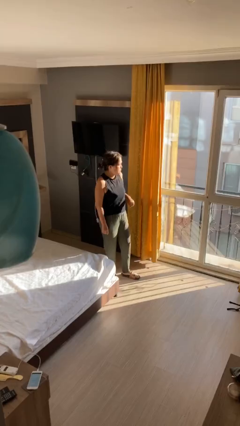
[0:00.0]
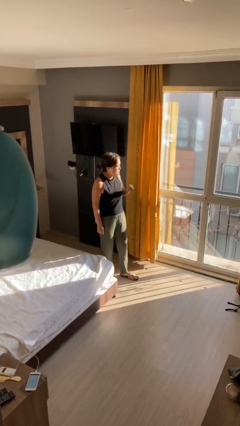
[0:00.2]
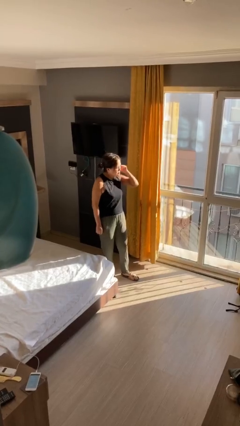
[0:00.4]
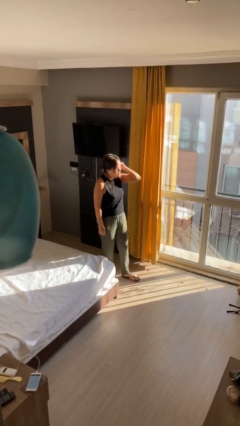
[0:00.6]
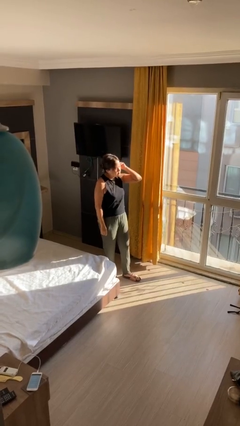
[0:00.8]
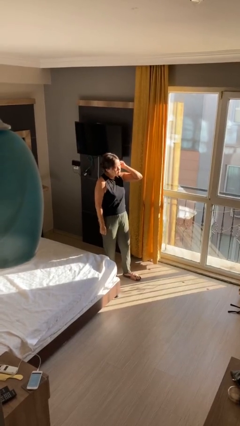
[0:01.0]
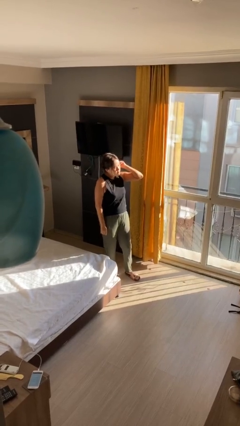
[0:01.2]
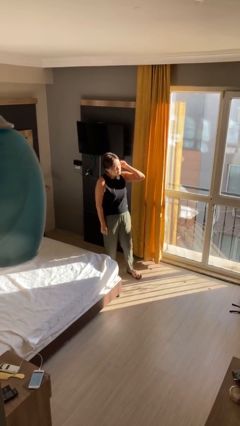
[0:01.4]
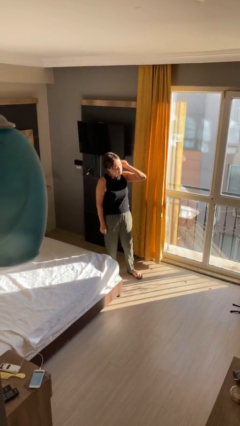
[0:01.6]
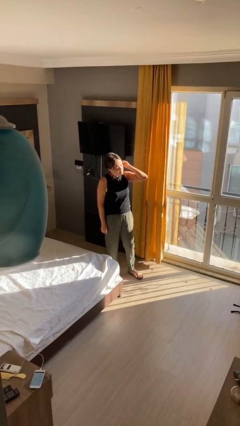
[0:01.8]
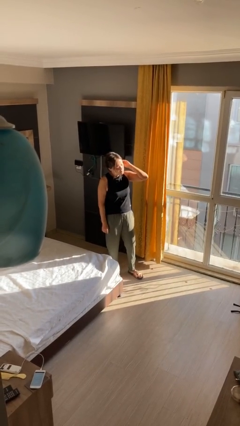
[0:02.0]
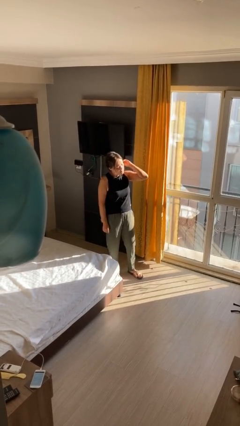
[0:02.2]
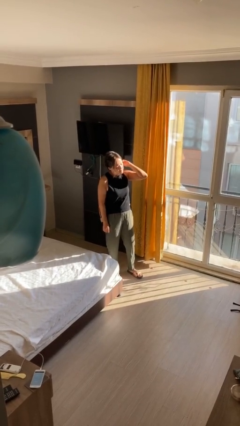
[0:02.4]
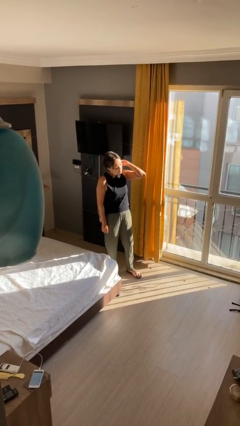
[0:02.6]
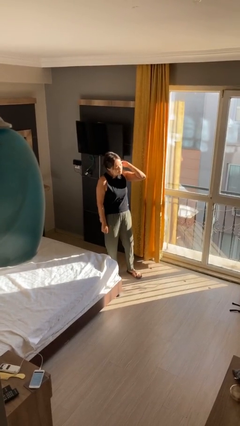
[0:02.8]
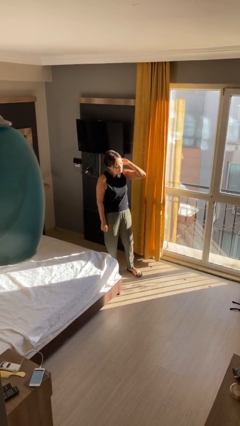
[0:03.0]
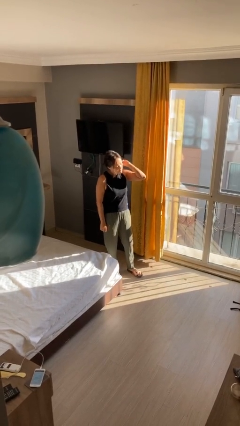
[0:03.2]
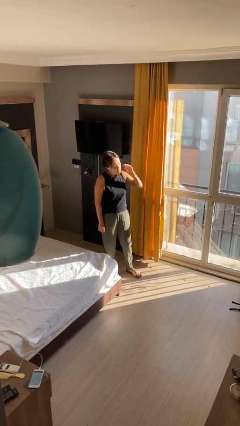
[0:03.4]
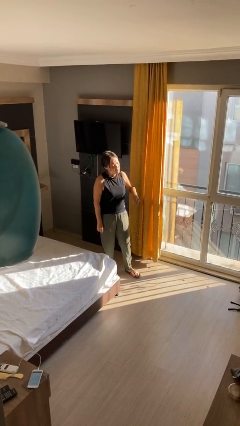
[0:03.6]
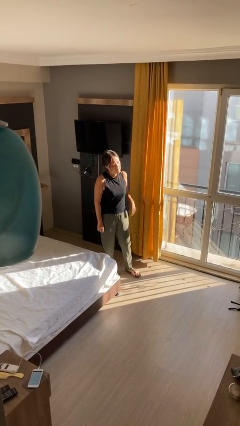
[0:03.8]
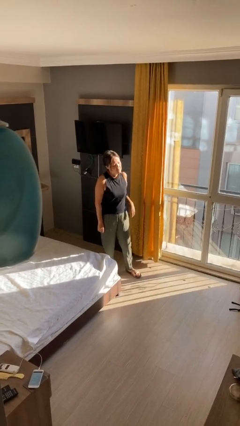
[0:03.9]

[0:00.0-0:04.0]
person touches earlobe

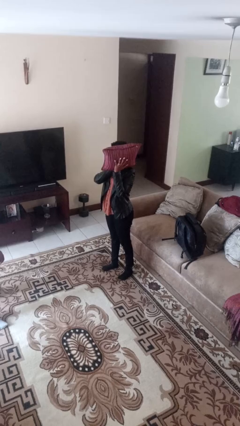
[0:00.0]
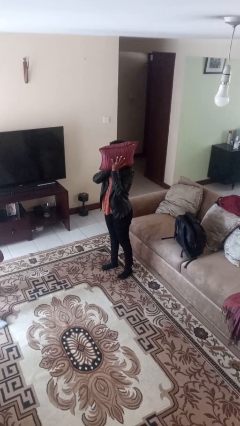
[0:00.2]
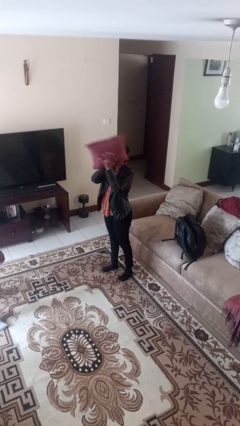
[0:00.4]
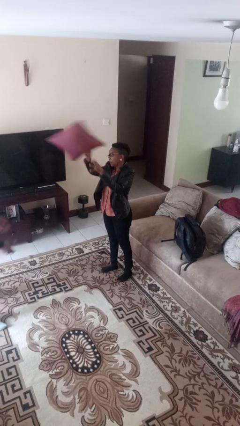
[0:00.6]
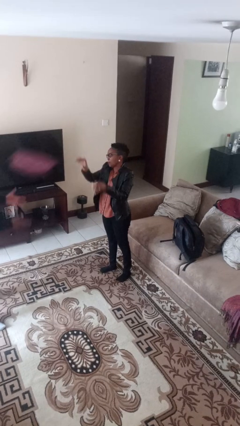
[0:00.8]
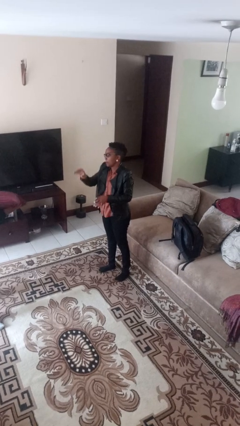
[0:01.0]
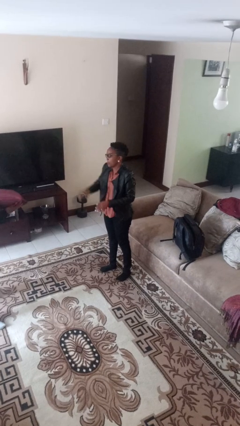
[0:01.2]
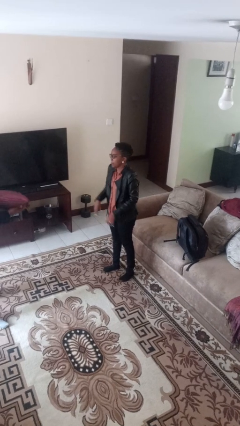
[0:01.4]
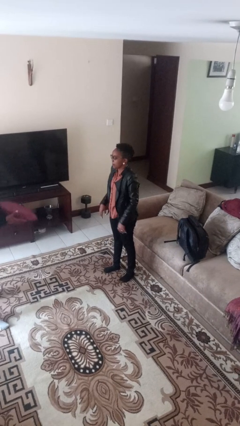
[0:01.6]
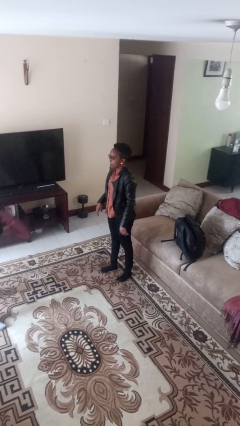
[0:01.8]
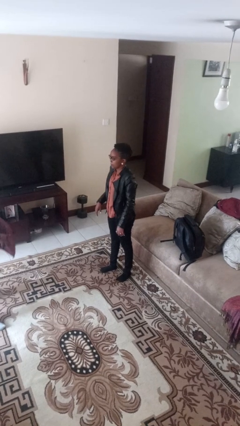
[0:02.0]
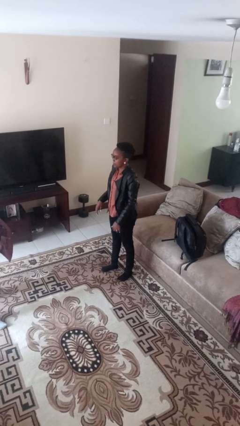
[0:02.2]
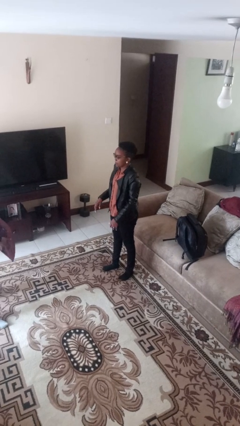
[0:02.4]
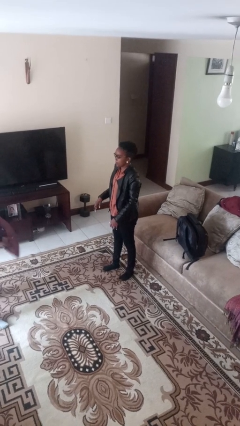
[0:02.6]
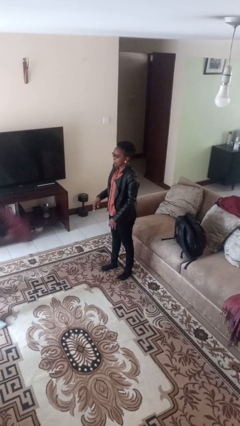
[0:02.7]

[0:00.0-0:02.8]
person throws object to person

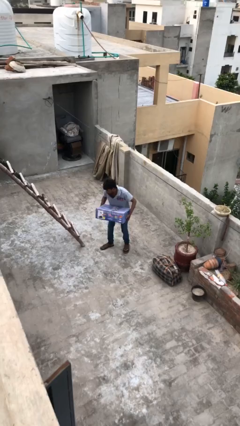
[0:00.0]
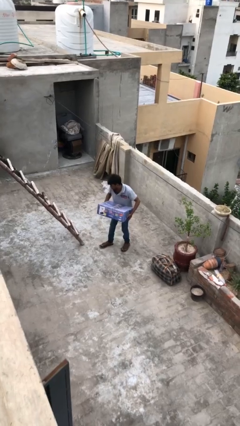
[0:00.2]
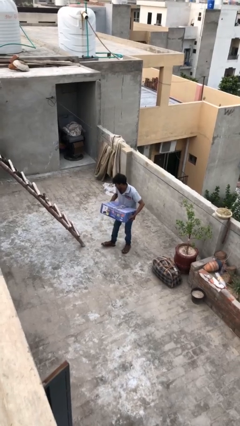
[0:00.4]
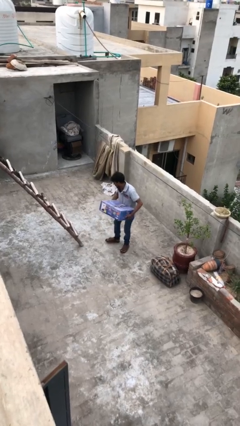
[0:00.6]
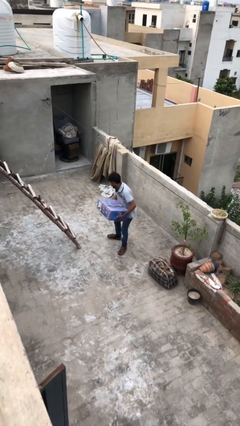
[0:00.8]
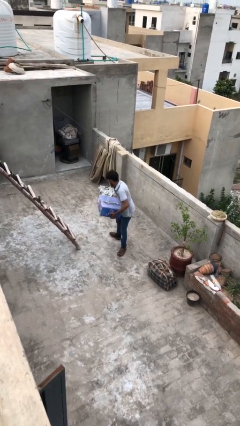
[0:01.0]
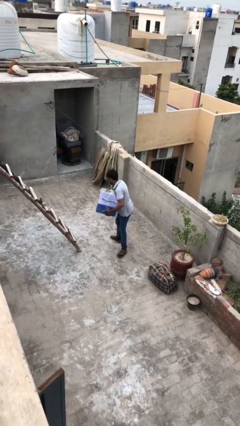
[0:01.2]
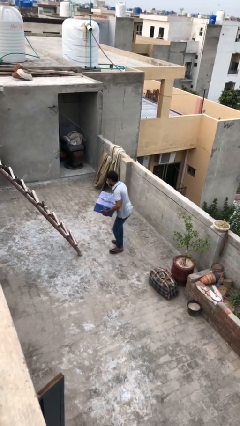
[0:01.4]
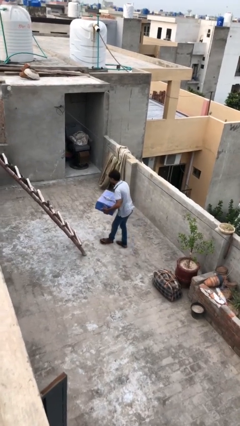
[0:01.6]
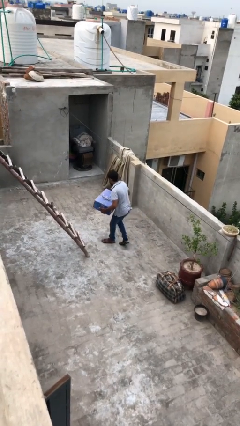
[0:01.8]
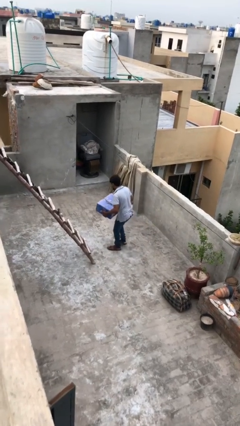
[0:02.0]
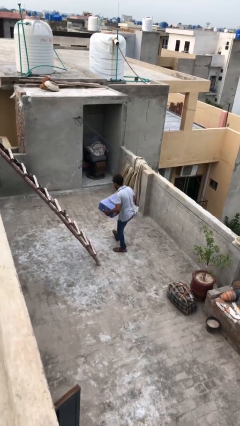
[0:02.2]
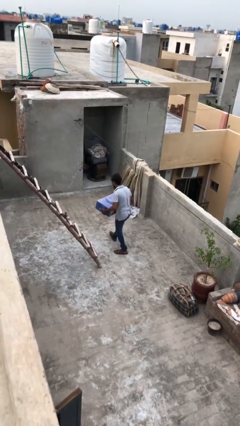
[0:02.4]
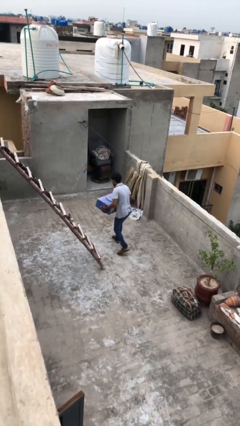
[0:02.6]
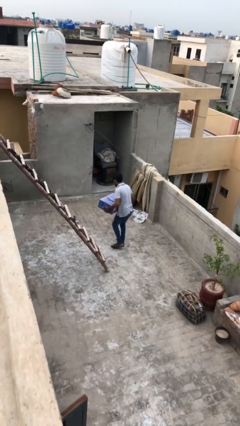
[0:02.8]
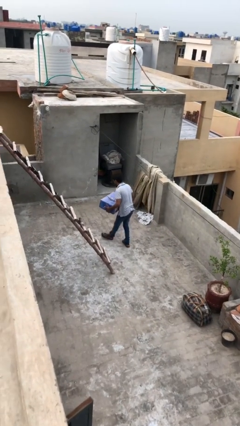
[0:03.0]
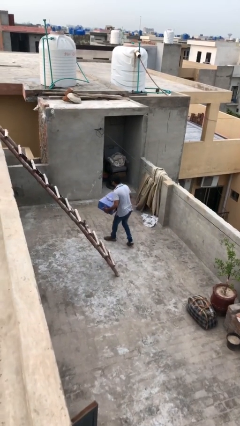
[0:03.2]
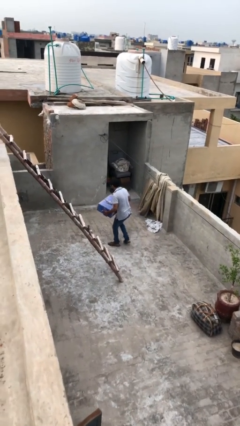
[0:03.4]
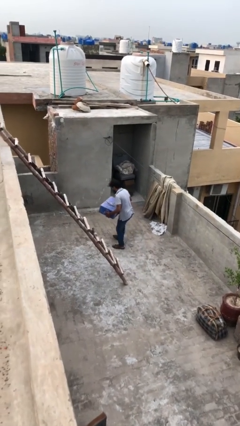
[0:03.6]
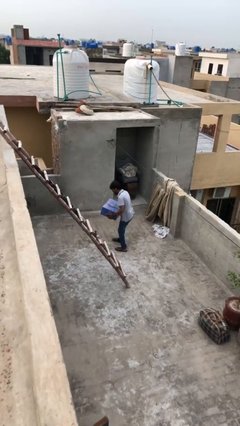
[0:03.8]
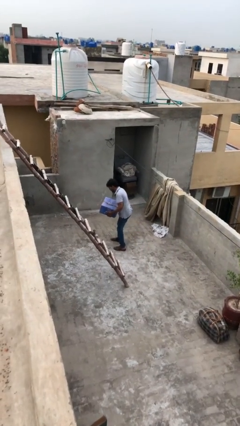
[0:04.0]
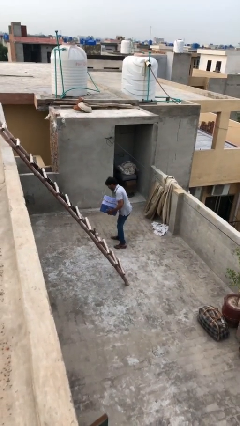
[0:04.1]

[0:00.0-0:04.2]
person carries heavy object

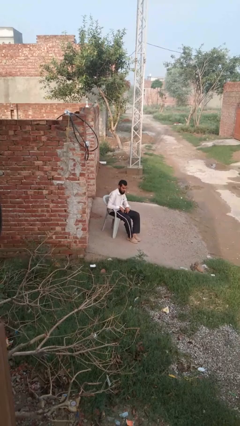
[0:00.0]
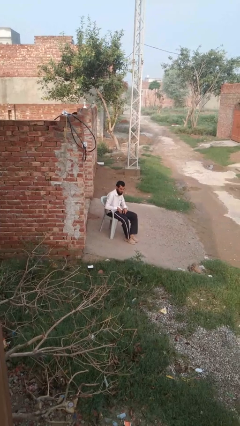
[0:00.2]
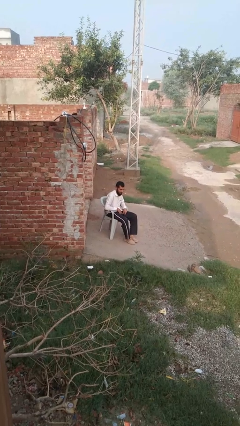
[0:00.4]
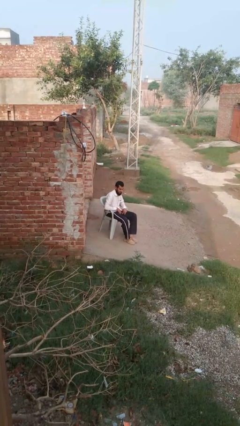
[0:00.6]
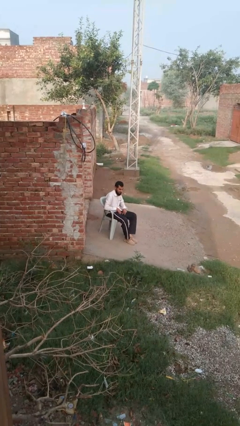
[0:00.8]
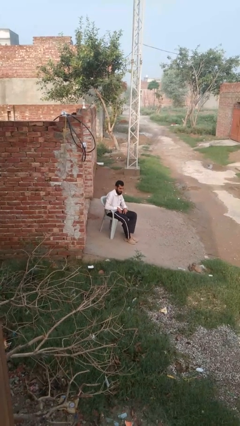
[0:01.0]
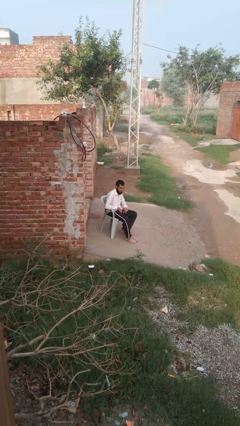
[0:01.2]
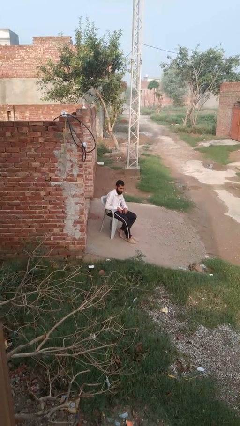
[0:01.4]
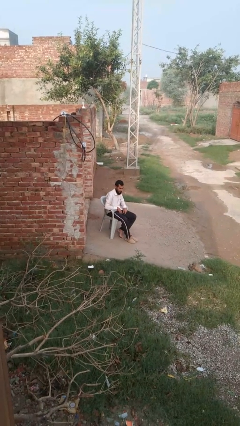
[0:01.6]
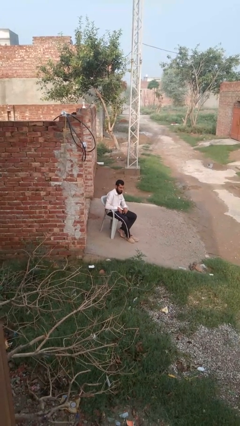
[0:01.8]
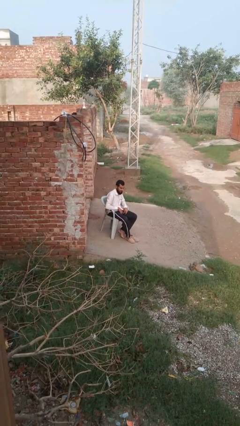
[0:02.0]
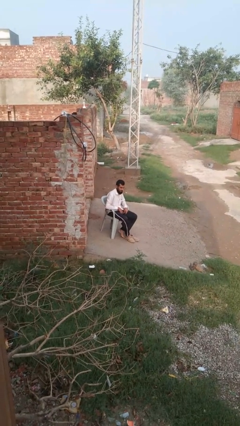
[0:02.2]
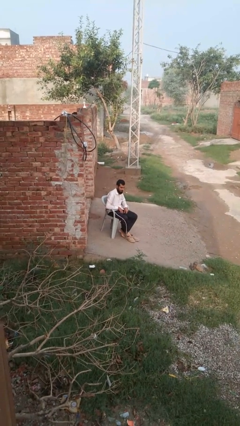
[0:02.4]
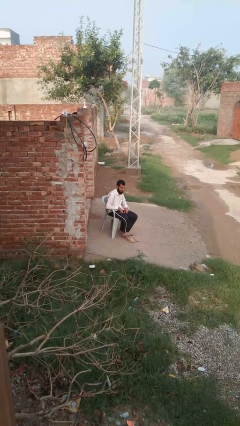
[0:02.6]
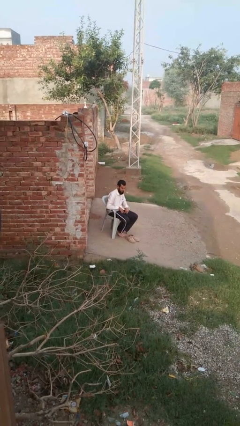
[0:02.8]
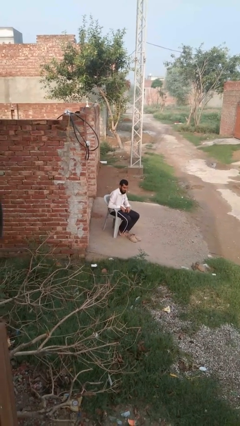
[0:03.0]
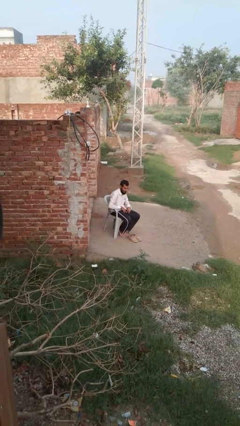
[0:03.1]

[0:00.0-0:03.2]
person takes off shoes

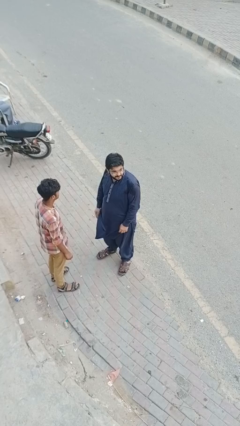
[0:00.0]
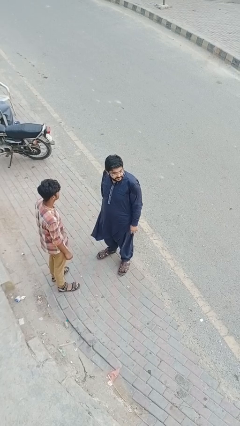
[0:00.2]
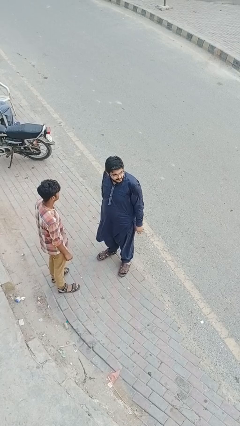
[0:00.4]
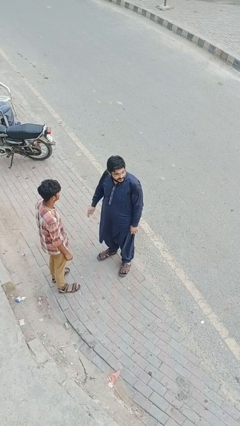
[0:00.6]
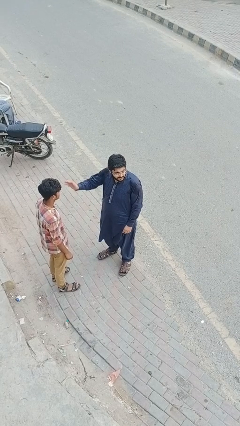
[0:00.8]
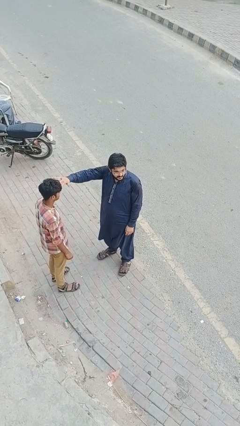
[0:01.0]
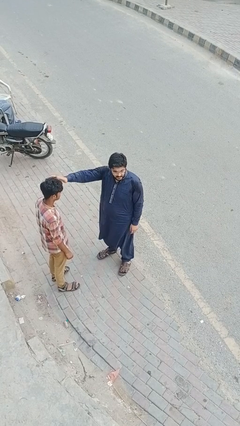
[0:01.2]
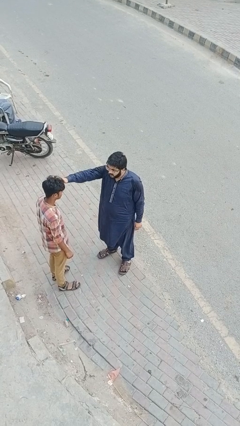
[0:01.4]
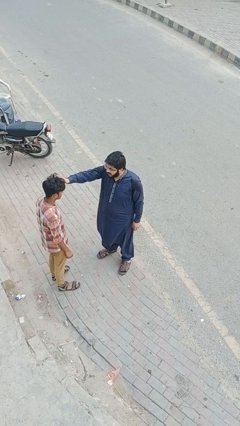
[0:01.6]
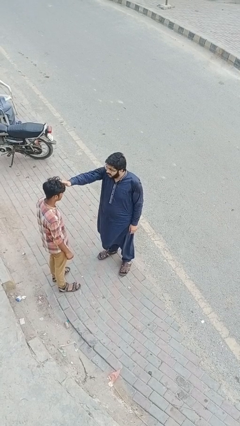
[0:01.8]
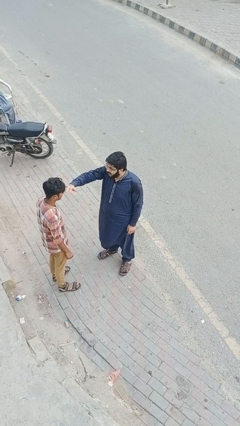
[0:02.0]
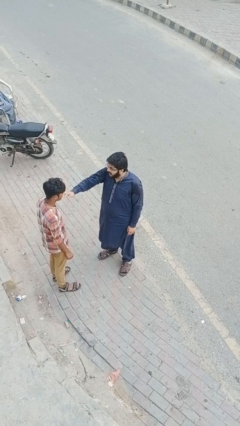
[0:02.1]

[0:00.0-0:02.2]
person grabs person by hair

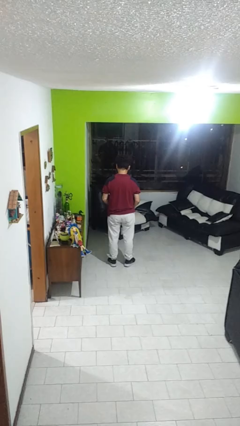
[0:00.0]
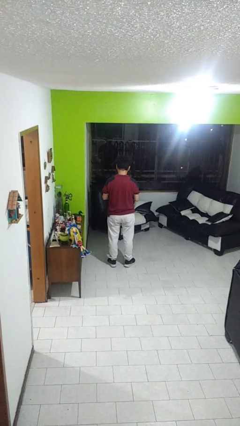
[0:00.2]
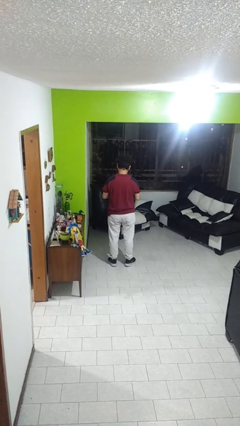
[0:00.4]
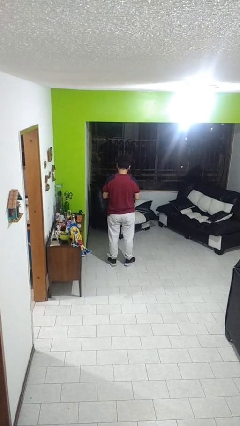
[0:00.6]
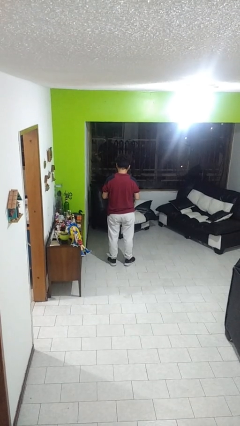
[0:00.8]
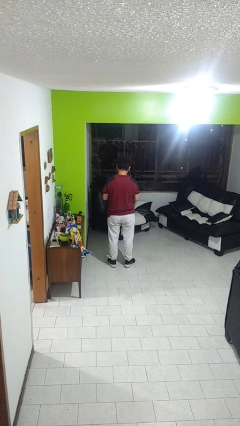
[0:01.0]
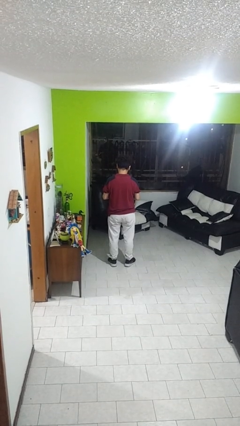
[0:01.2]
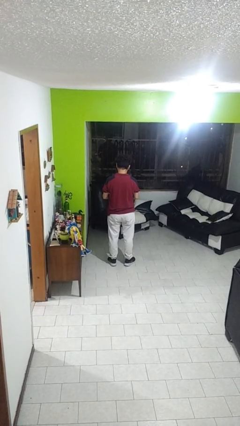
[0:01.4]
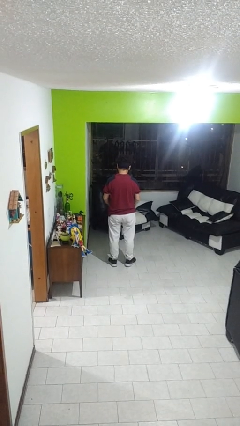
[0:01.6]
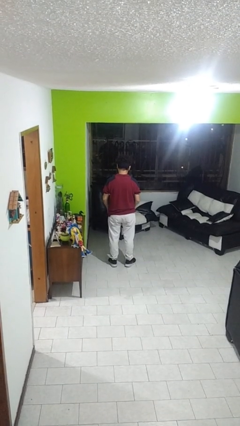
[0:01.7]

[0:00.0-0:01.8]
person cracks knuckles
